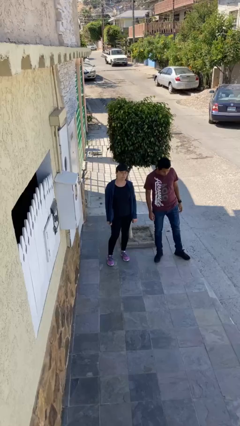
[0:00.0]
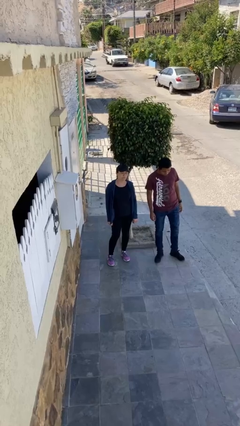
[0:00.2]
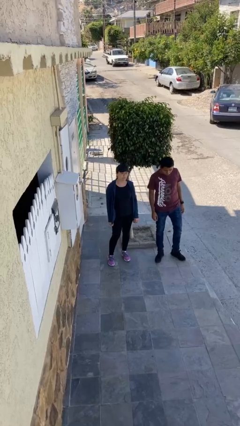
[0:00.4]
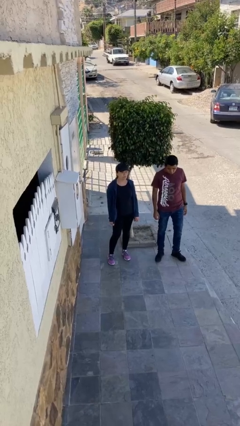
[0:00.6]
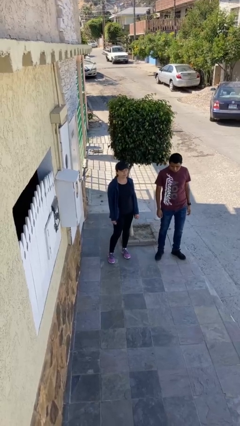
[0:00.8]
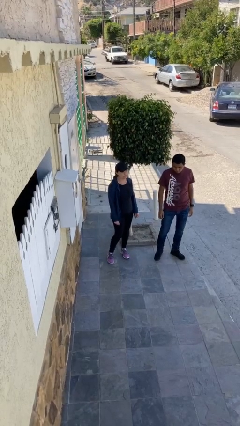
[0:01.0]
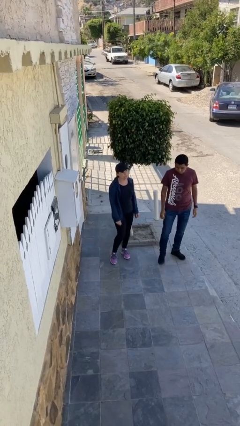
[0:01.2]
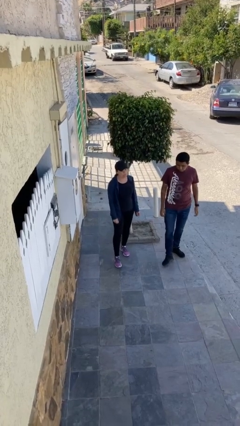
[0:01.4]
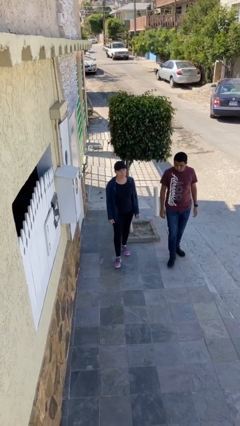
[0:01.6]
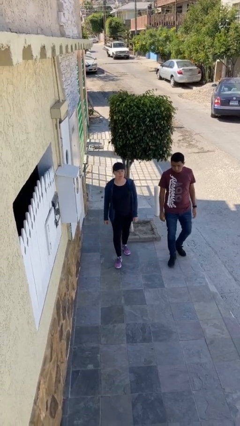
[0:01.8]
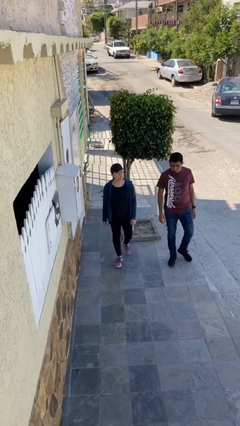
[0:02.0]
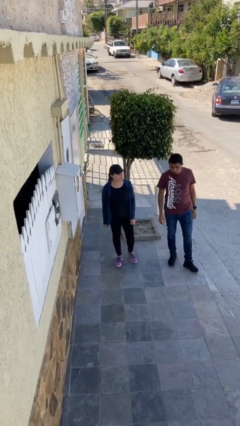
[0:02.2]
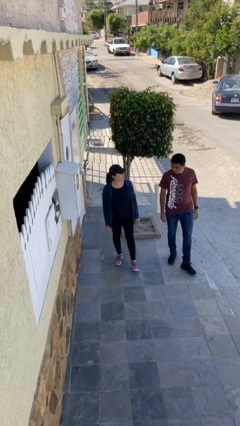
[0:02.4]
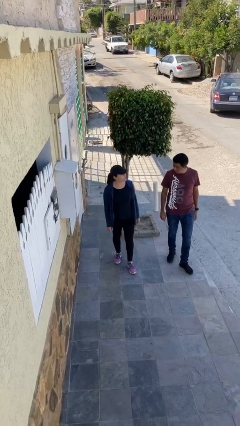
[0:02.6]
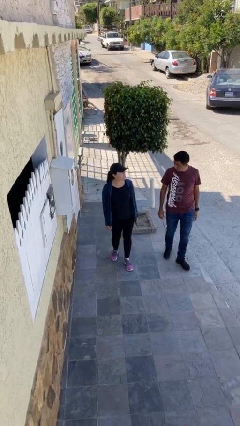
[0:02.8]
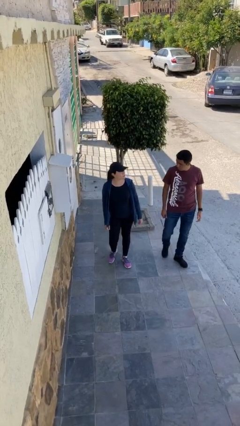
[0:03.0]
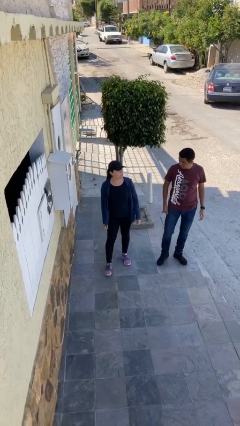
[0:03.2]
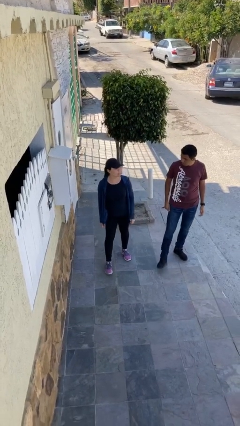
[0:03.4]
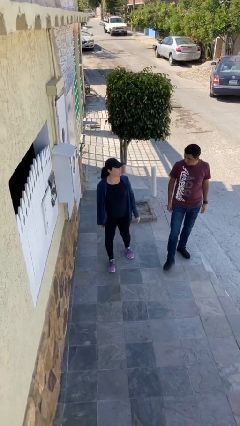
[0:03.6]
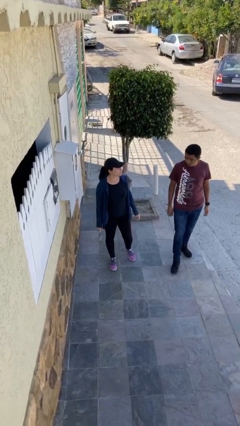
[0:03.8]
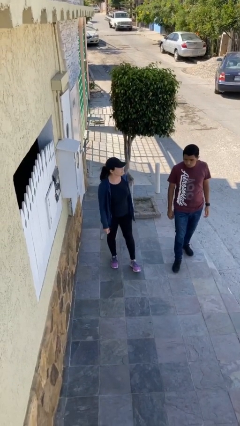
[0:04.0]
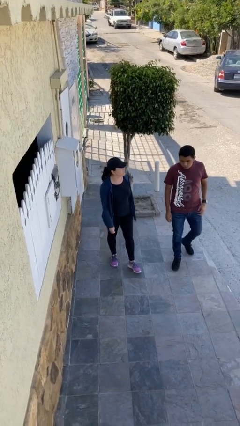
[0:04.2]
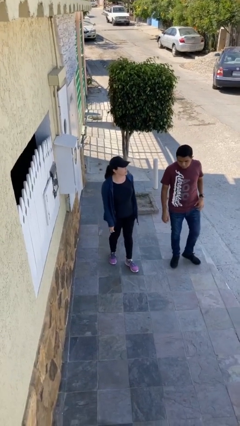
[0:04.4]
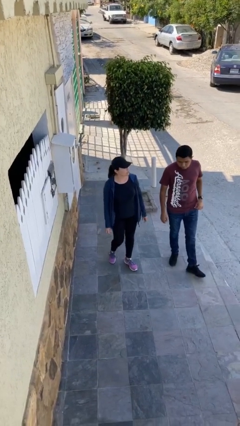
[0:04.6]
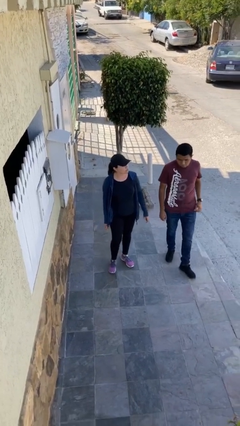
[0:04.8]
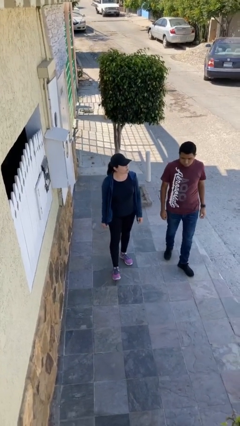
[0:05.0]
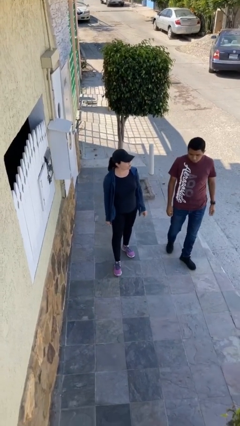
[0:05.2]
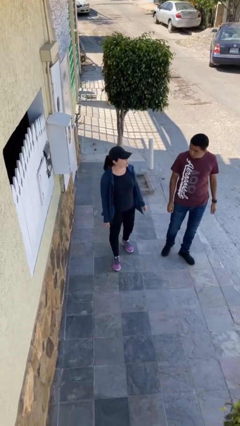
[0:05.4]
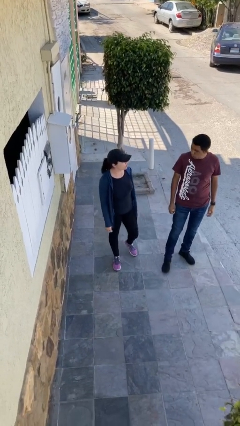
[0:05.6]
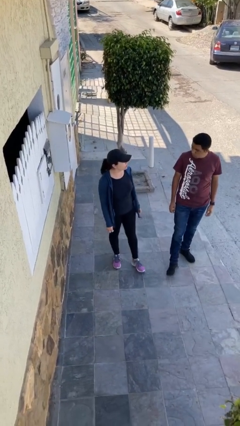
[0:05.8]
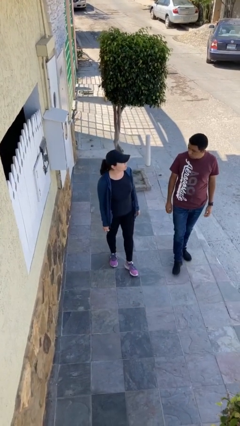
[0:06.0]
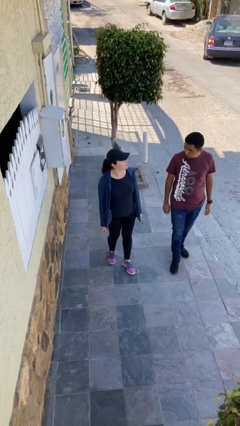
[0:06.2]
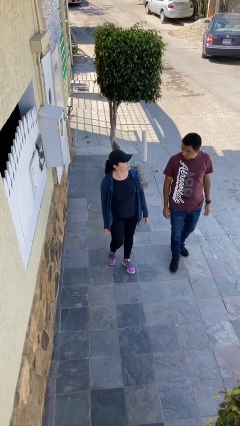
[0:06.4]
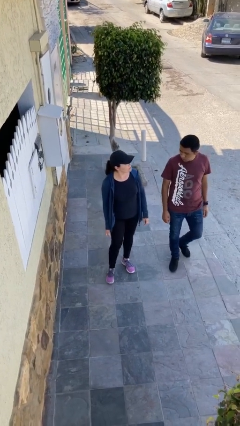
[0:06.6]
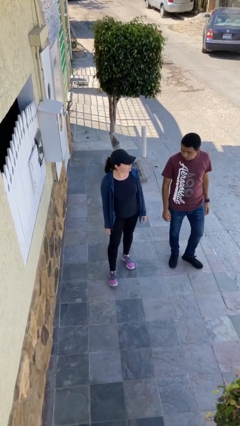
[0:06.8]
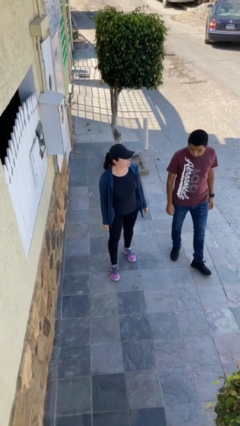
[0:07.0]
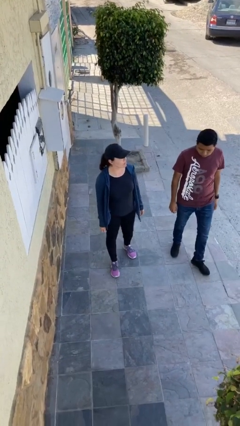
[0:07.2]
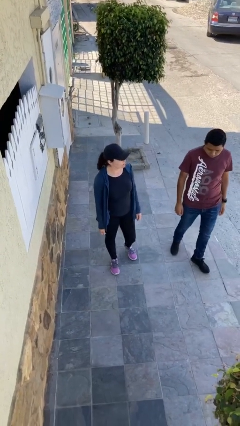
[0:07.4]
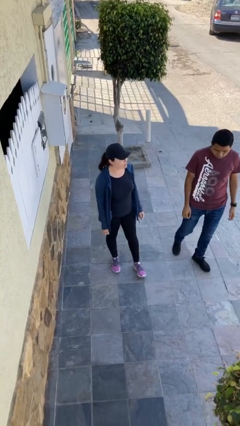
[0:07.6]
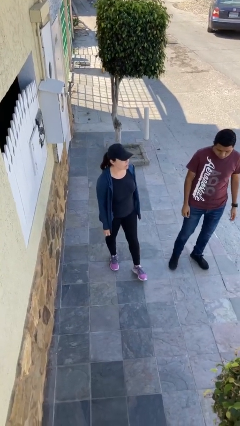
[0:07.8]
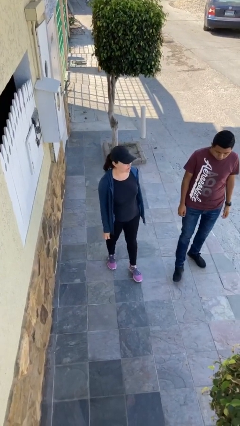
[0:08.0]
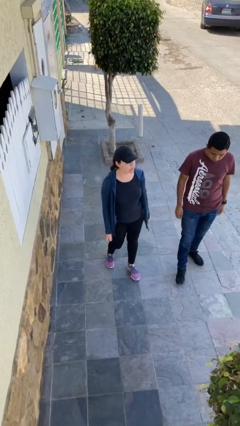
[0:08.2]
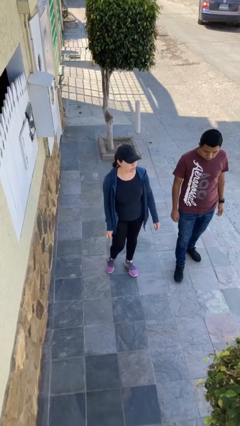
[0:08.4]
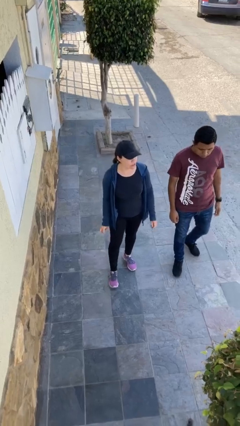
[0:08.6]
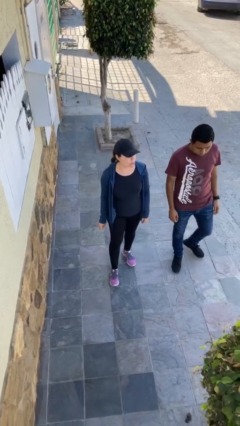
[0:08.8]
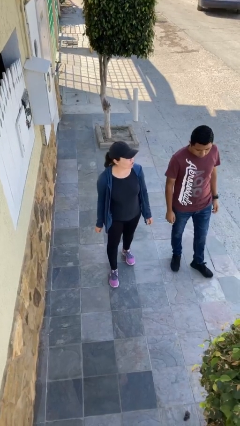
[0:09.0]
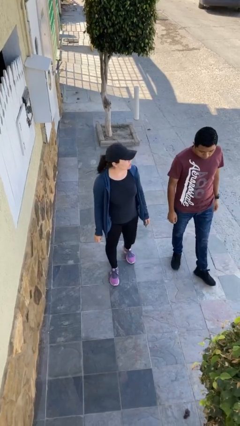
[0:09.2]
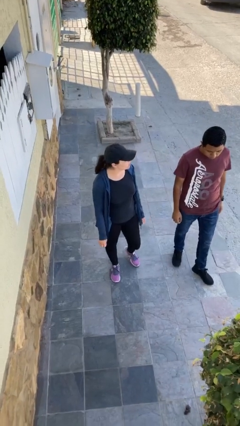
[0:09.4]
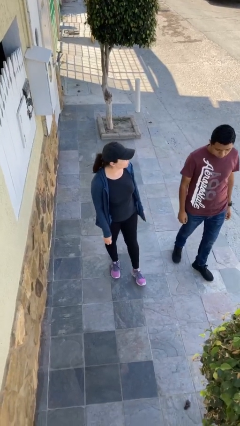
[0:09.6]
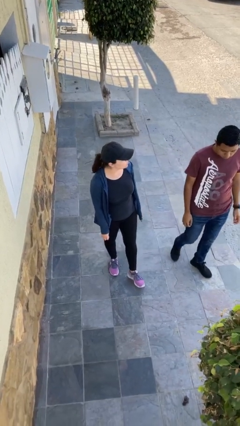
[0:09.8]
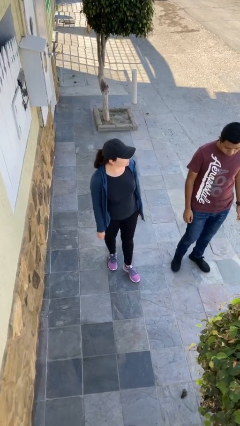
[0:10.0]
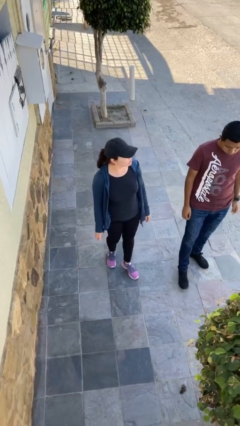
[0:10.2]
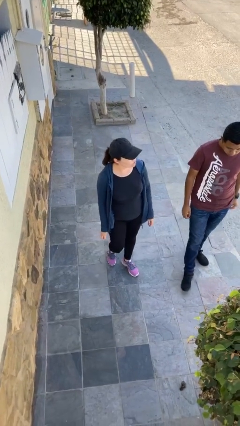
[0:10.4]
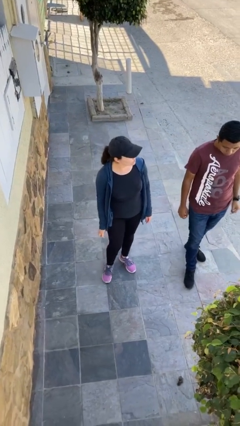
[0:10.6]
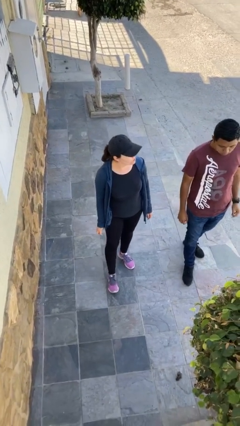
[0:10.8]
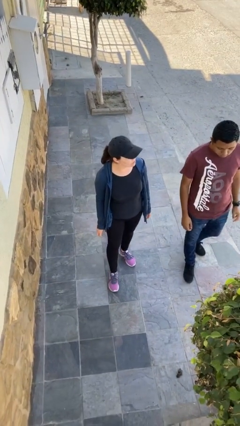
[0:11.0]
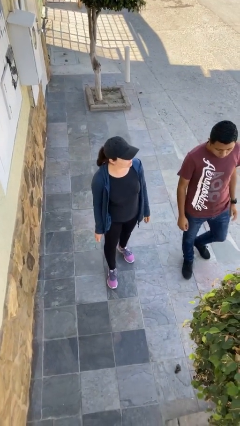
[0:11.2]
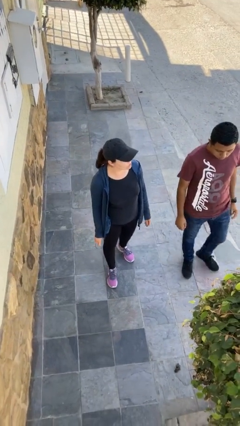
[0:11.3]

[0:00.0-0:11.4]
person talks to person

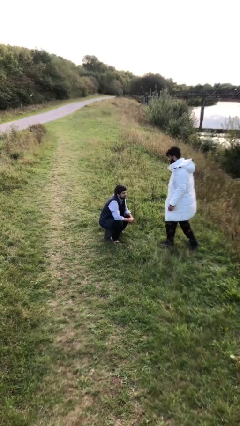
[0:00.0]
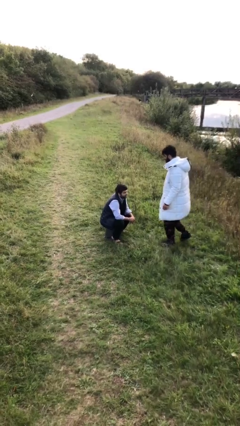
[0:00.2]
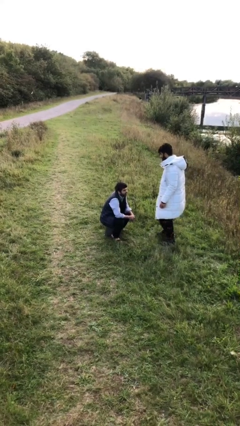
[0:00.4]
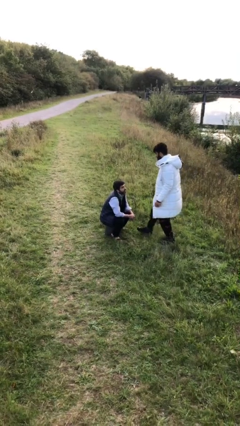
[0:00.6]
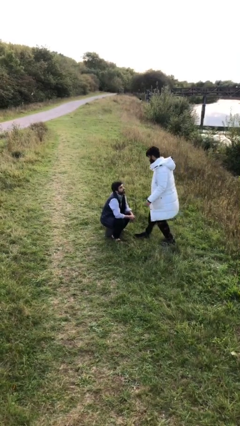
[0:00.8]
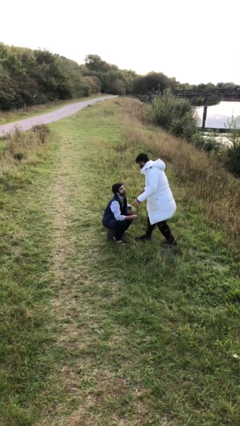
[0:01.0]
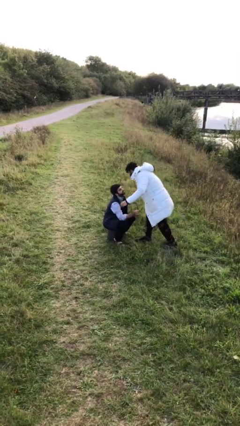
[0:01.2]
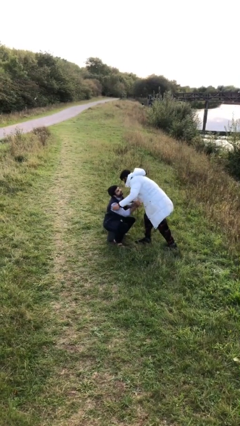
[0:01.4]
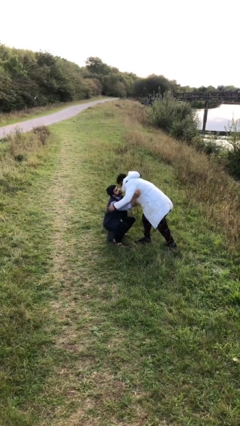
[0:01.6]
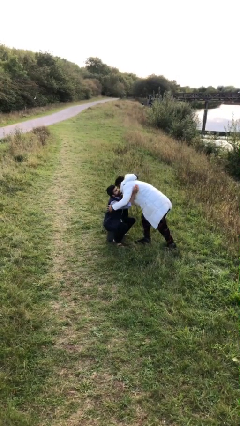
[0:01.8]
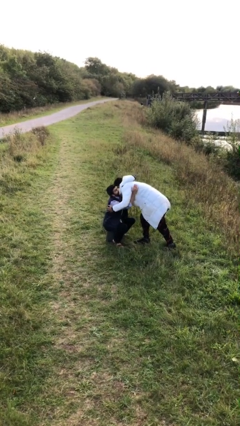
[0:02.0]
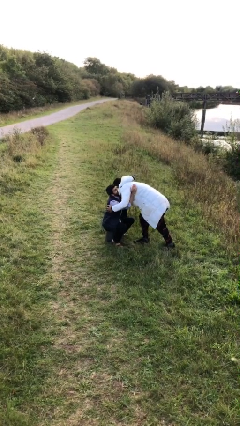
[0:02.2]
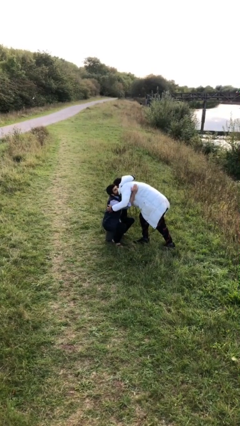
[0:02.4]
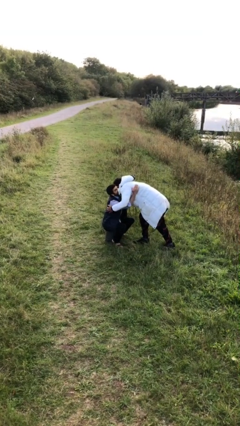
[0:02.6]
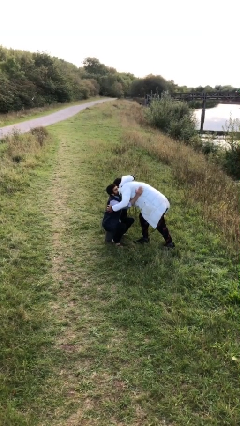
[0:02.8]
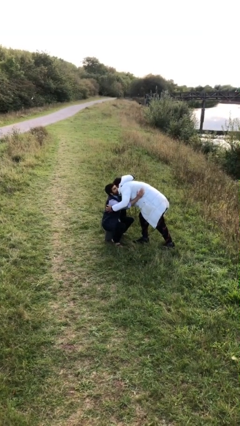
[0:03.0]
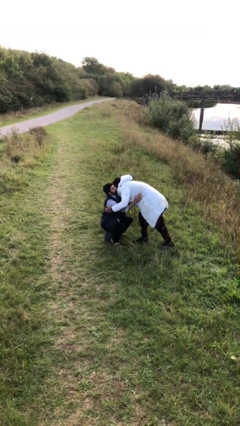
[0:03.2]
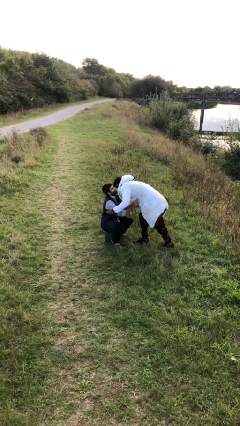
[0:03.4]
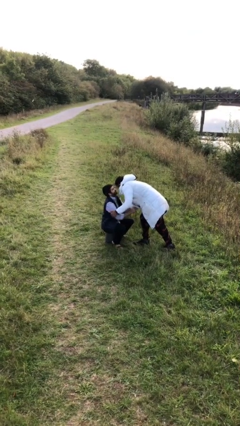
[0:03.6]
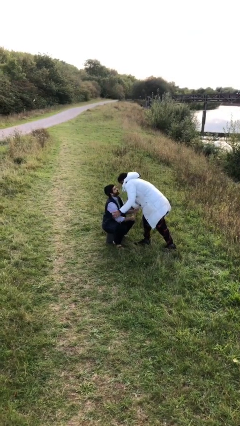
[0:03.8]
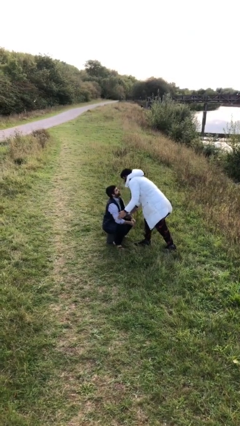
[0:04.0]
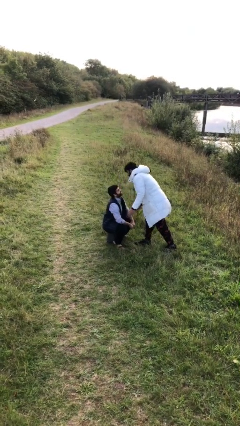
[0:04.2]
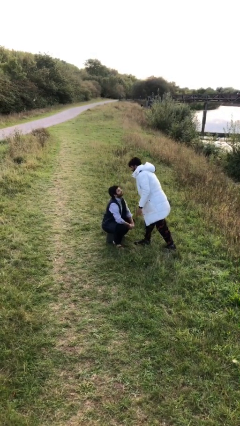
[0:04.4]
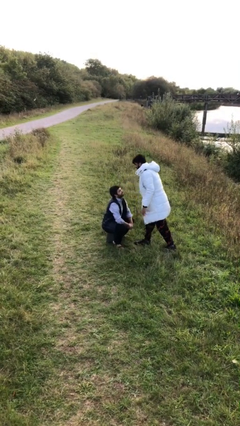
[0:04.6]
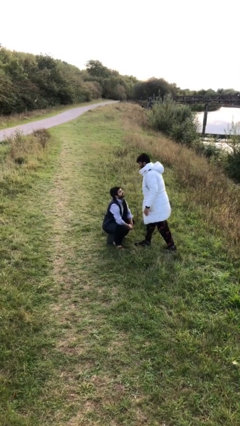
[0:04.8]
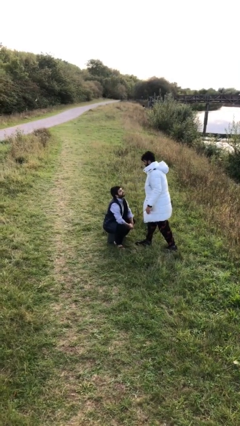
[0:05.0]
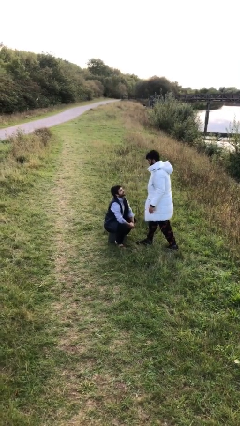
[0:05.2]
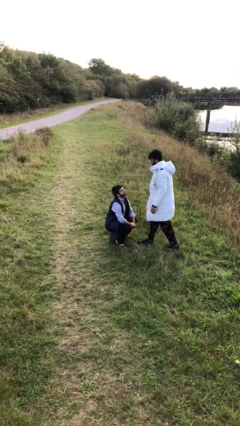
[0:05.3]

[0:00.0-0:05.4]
person embraces person

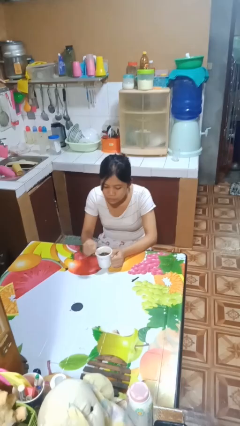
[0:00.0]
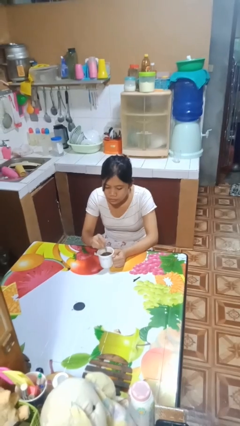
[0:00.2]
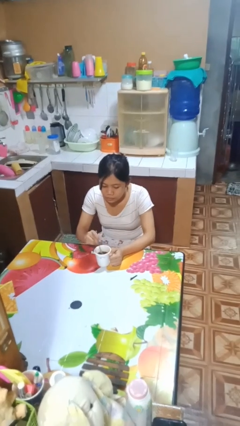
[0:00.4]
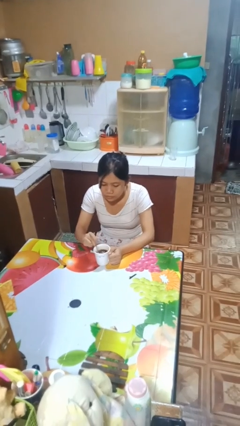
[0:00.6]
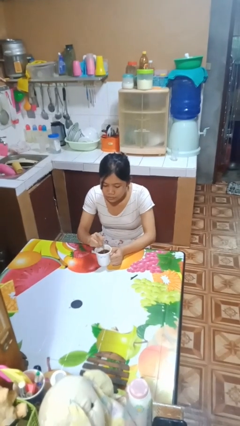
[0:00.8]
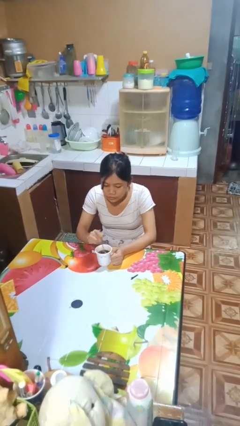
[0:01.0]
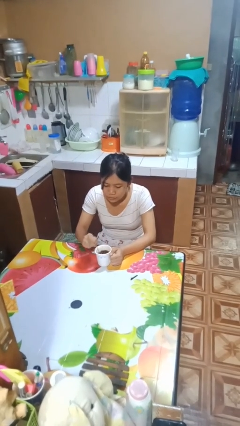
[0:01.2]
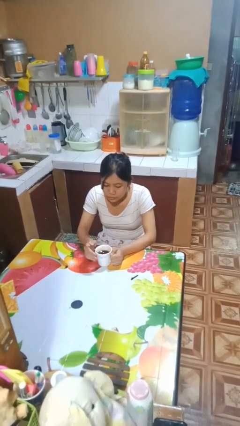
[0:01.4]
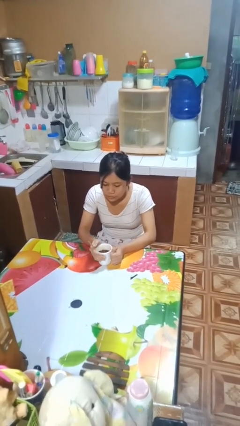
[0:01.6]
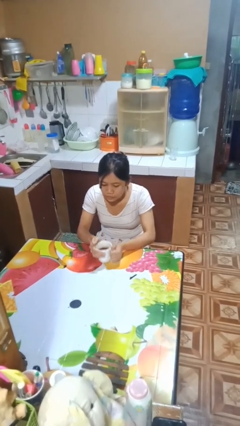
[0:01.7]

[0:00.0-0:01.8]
person stirs mug
